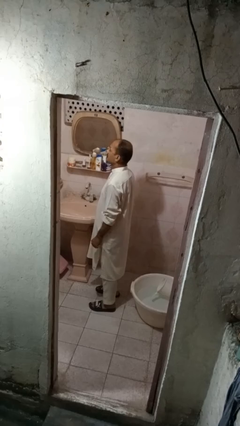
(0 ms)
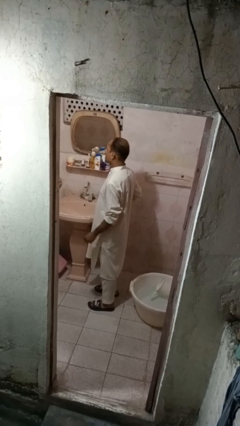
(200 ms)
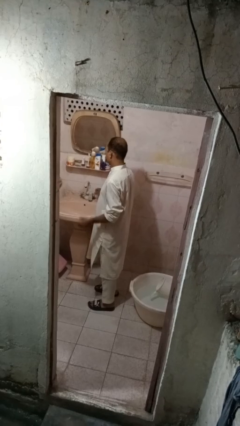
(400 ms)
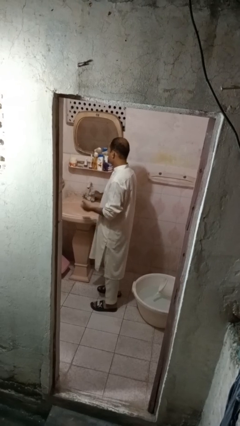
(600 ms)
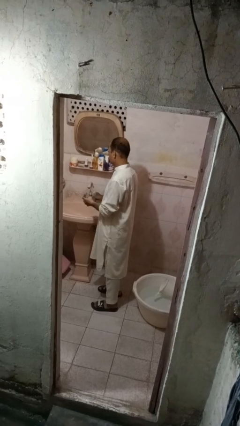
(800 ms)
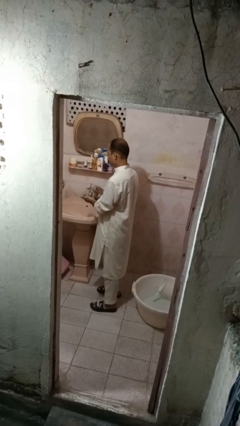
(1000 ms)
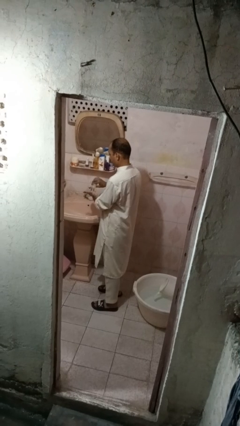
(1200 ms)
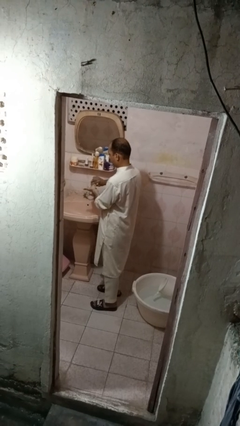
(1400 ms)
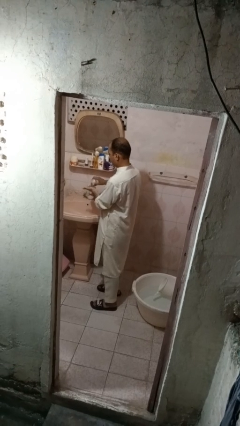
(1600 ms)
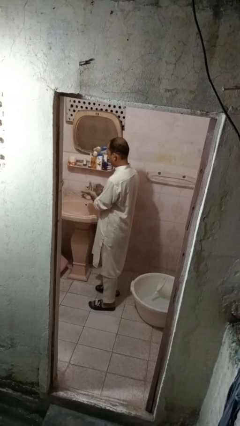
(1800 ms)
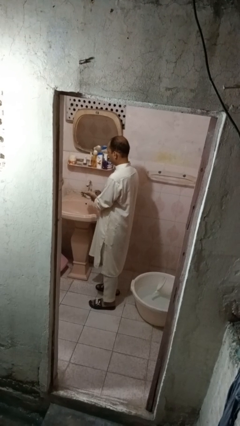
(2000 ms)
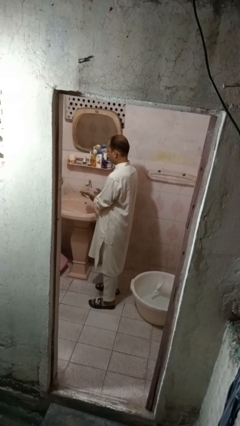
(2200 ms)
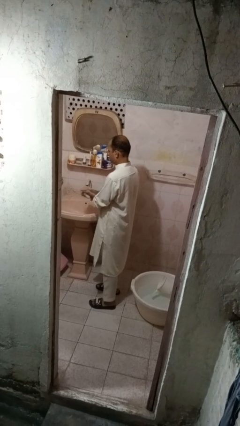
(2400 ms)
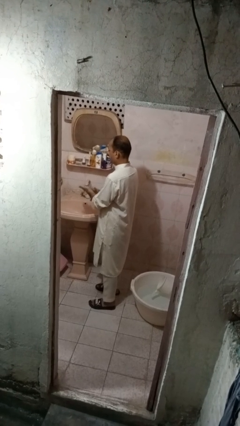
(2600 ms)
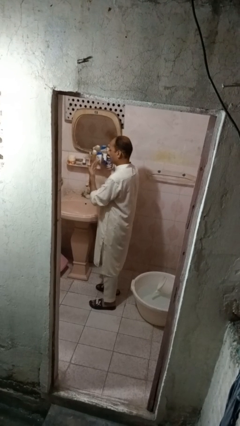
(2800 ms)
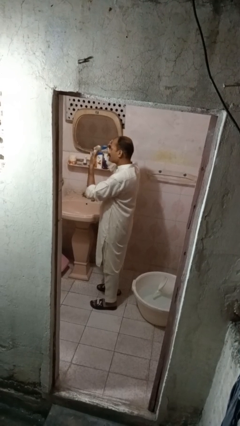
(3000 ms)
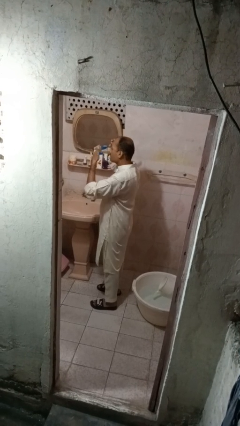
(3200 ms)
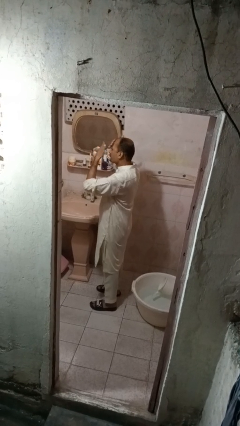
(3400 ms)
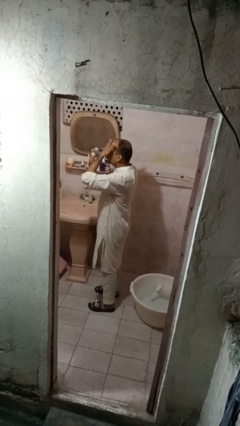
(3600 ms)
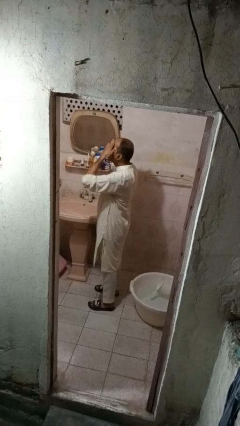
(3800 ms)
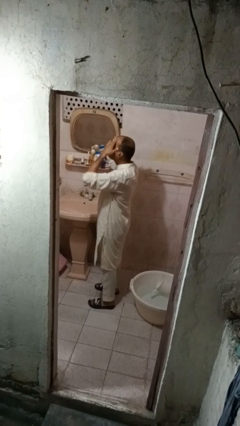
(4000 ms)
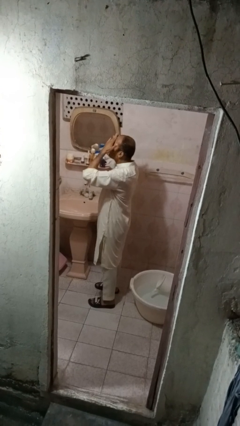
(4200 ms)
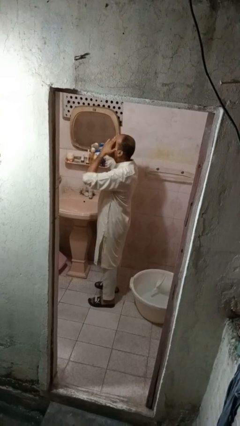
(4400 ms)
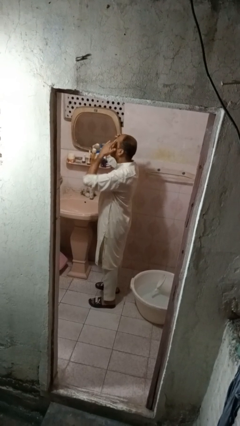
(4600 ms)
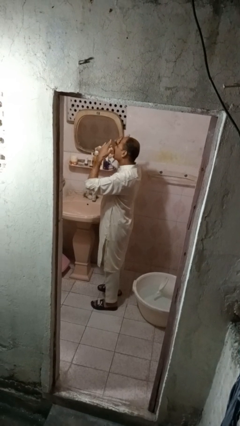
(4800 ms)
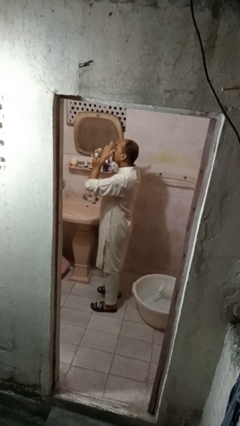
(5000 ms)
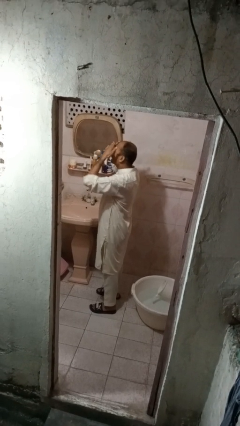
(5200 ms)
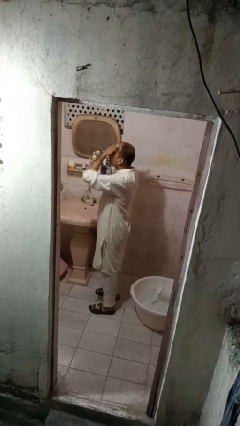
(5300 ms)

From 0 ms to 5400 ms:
person applies facial moisturizer

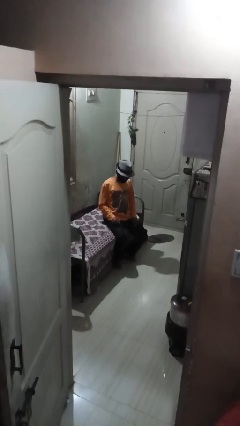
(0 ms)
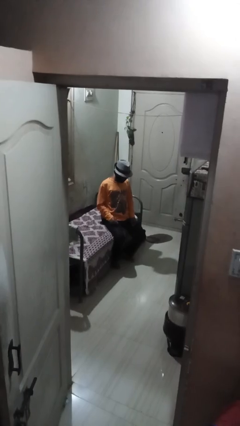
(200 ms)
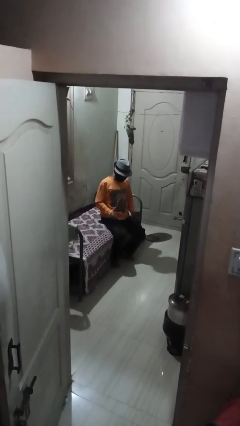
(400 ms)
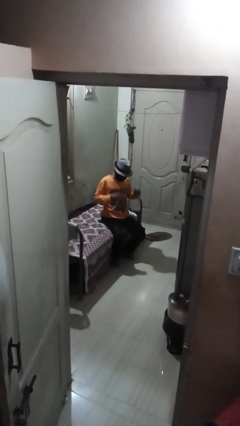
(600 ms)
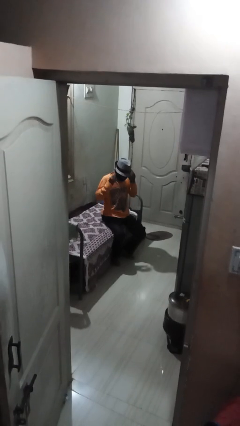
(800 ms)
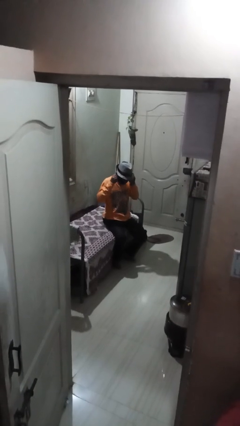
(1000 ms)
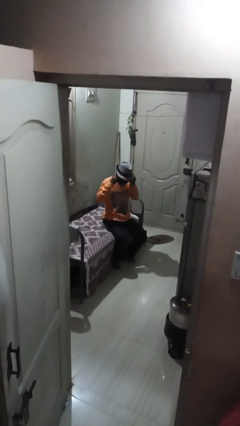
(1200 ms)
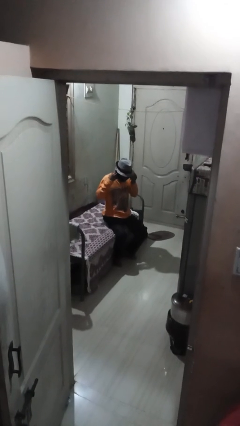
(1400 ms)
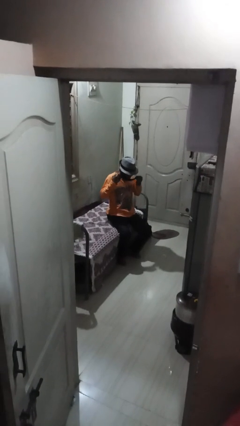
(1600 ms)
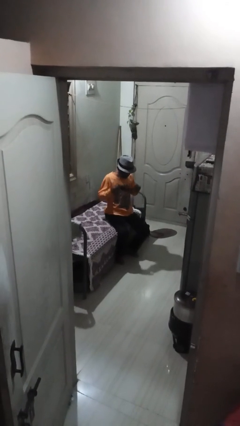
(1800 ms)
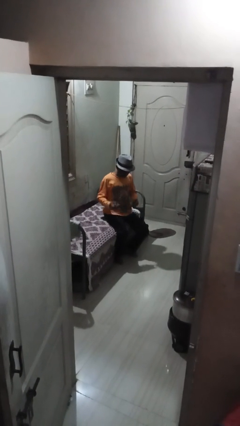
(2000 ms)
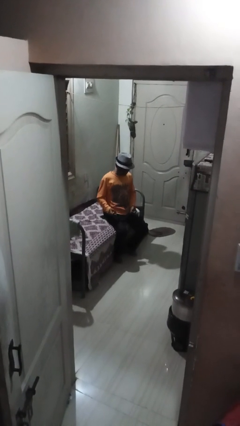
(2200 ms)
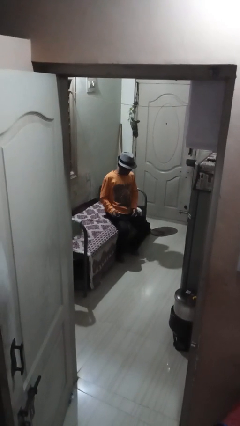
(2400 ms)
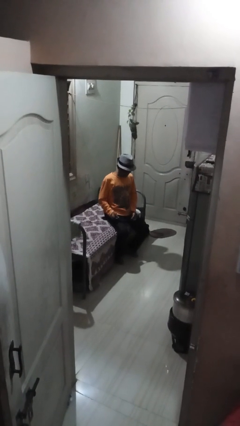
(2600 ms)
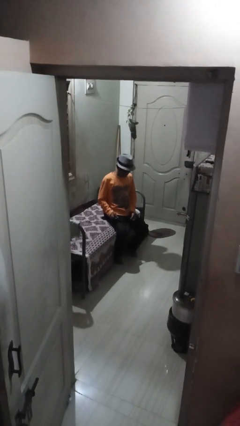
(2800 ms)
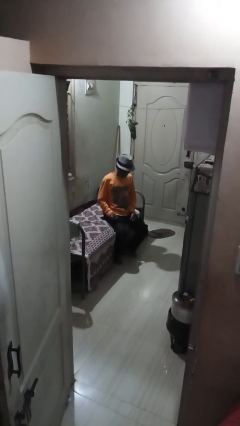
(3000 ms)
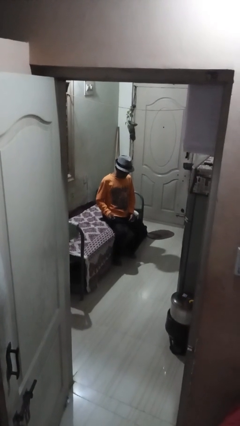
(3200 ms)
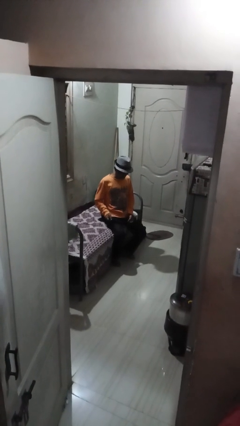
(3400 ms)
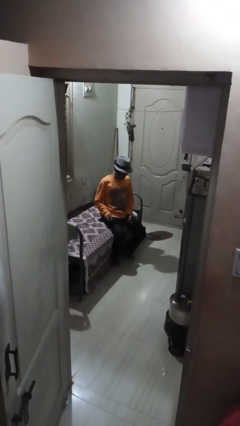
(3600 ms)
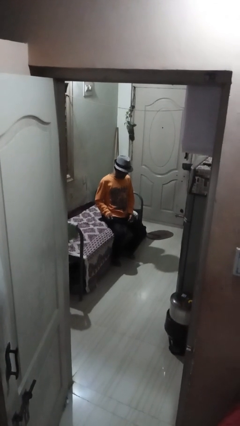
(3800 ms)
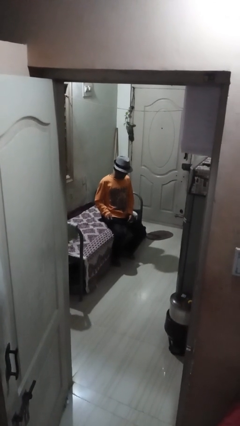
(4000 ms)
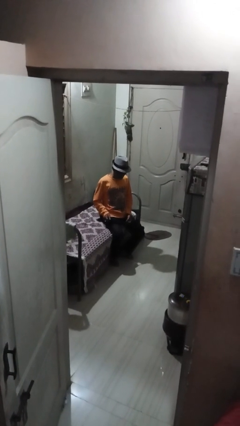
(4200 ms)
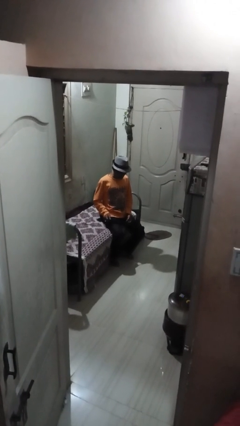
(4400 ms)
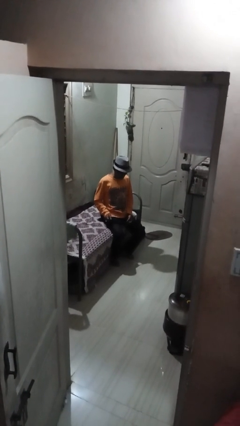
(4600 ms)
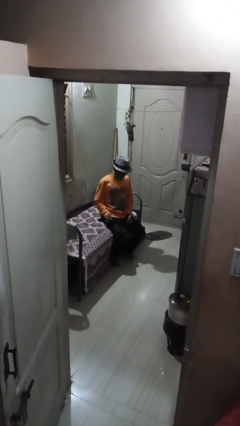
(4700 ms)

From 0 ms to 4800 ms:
person takes off facemask

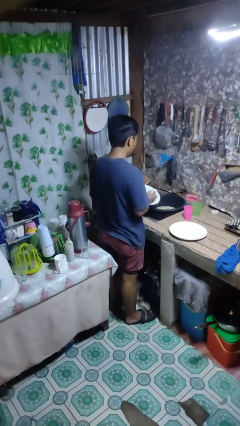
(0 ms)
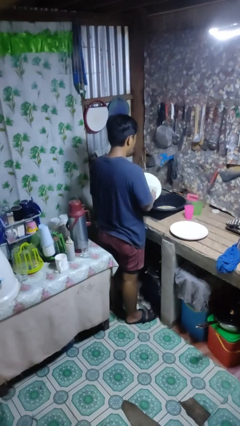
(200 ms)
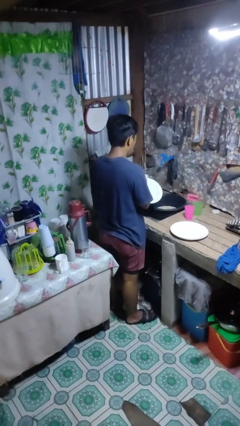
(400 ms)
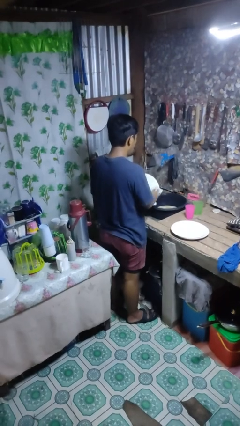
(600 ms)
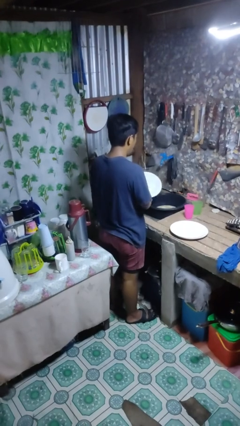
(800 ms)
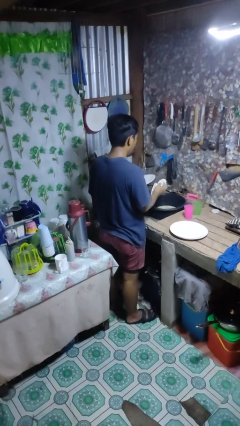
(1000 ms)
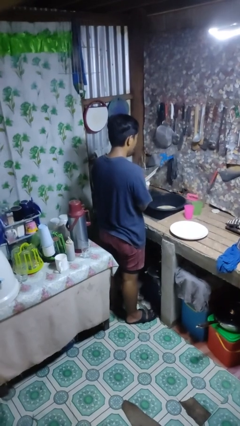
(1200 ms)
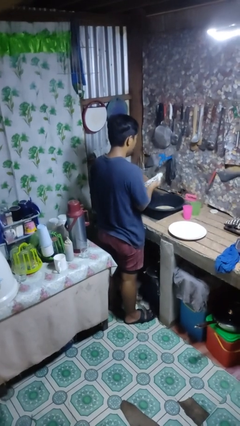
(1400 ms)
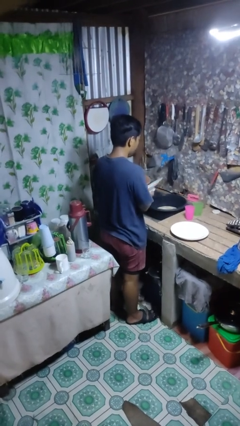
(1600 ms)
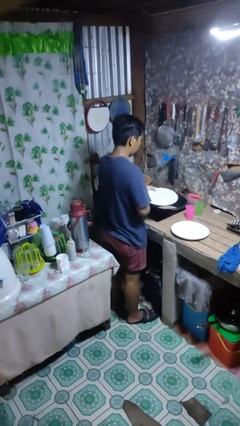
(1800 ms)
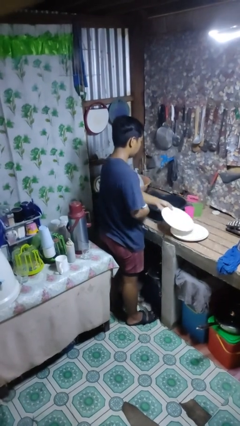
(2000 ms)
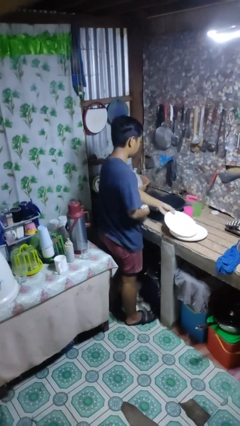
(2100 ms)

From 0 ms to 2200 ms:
person dries dish

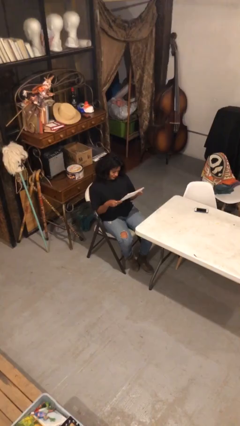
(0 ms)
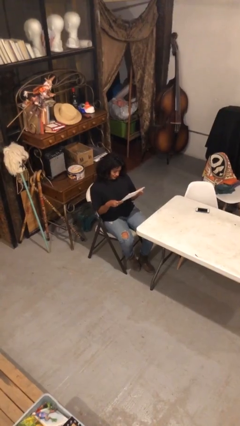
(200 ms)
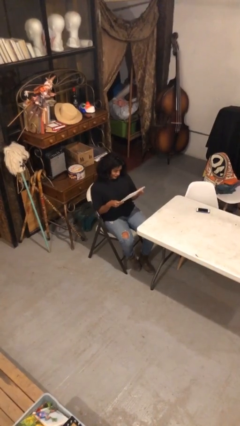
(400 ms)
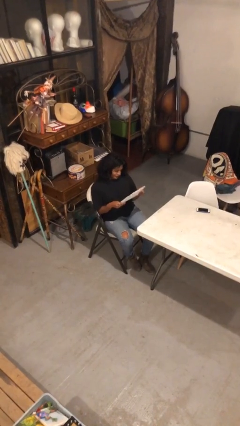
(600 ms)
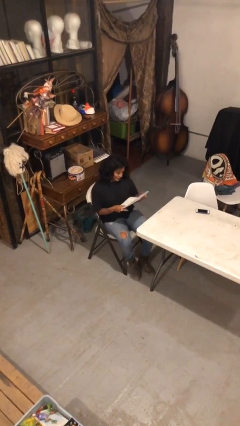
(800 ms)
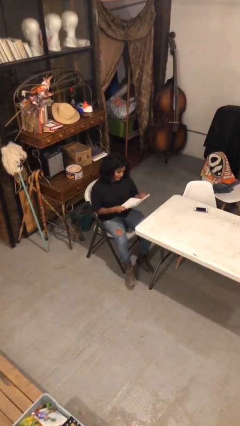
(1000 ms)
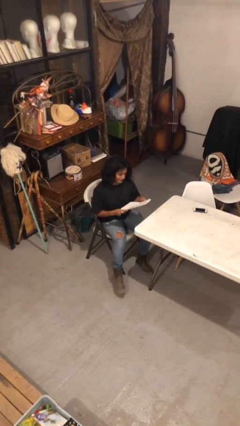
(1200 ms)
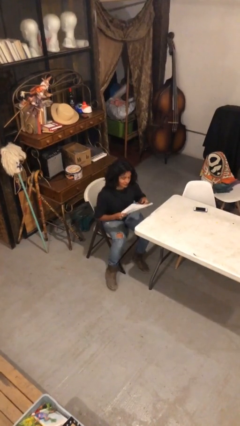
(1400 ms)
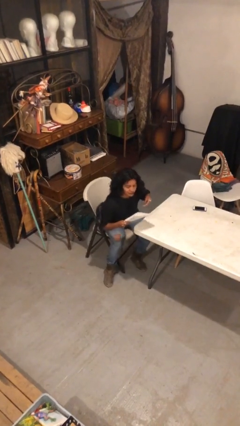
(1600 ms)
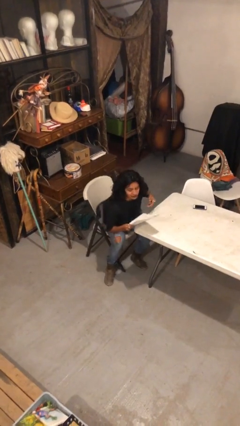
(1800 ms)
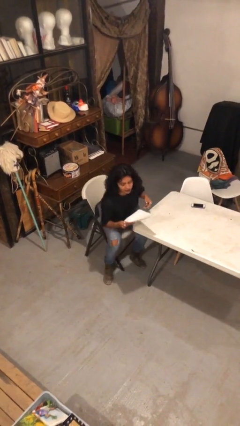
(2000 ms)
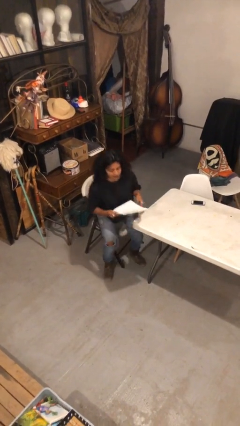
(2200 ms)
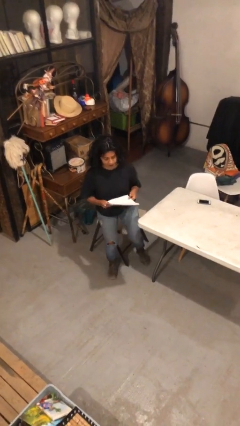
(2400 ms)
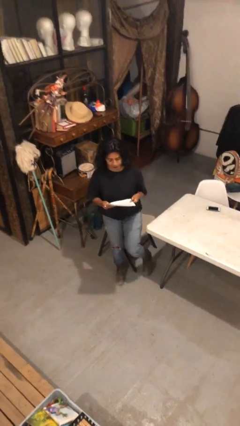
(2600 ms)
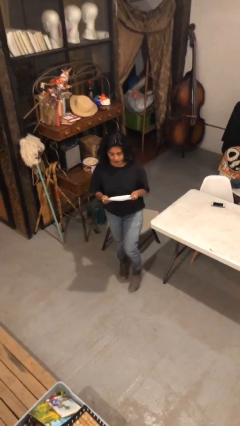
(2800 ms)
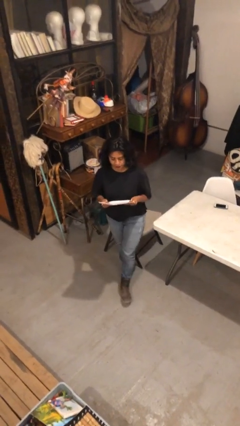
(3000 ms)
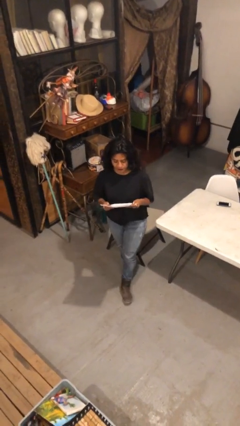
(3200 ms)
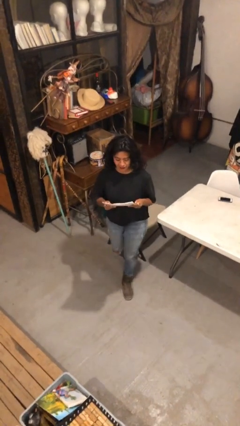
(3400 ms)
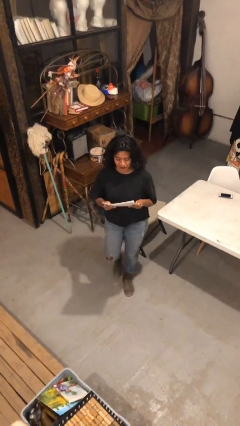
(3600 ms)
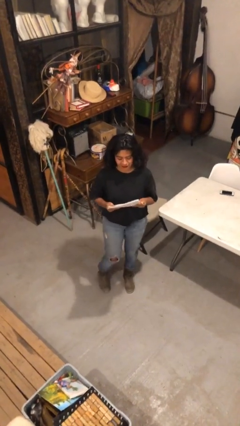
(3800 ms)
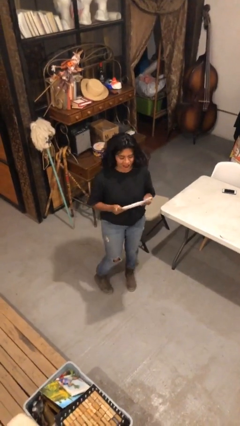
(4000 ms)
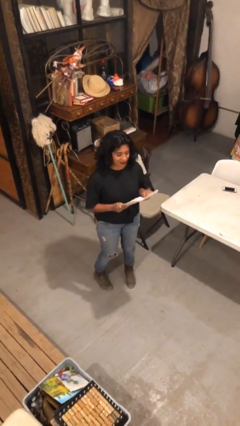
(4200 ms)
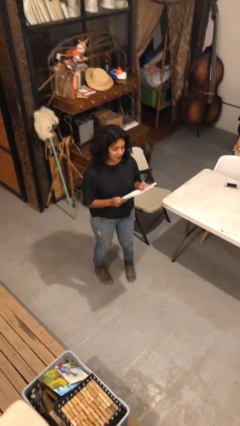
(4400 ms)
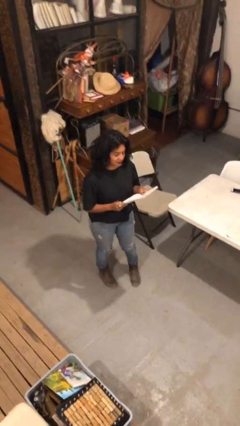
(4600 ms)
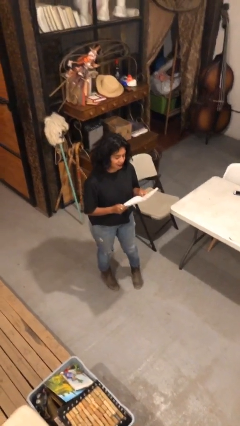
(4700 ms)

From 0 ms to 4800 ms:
person stands up

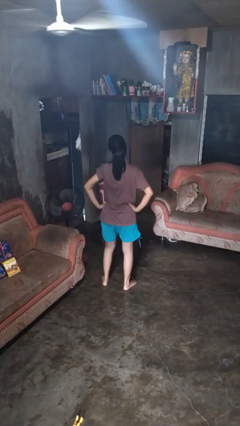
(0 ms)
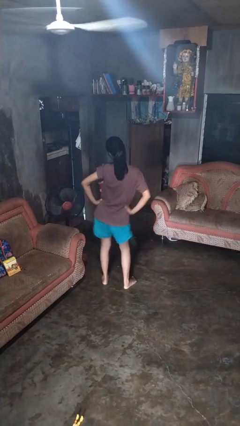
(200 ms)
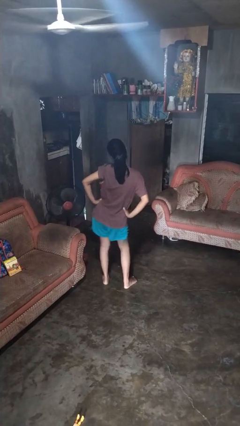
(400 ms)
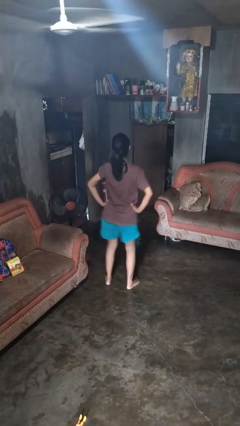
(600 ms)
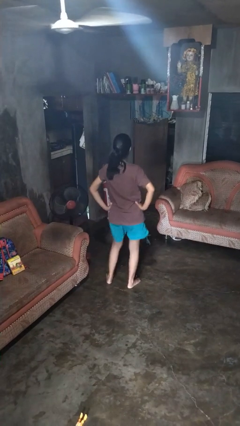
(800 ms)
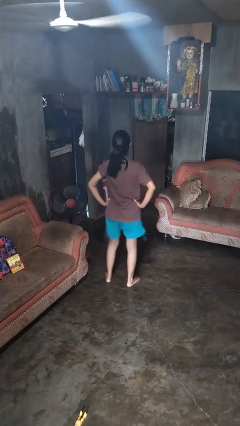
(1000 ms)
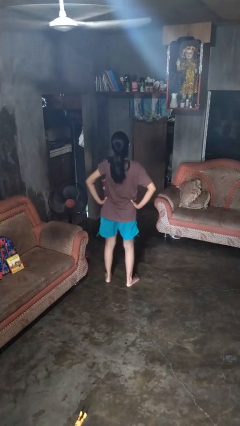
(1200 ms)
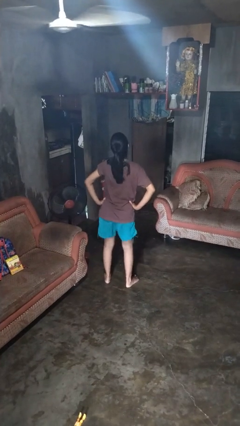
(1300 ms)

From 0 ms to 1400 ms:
person dances in place
